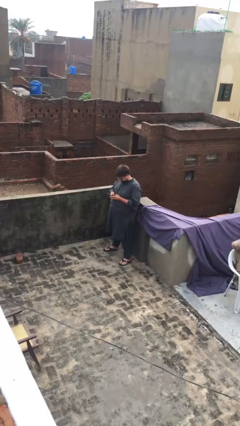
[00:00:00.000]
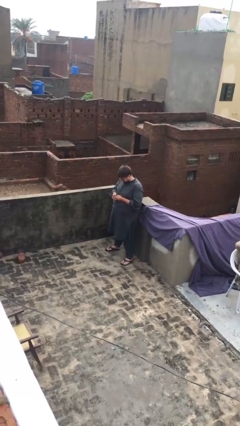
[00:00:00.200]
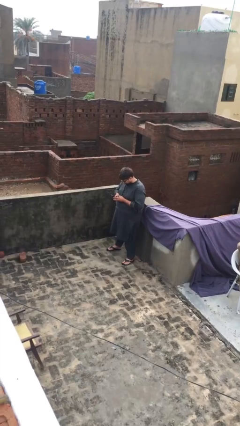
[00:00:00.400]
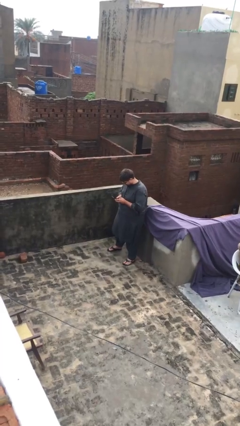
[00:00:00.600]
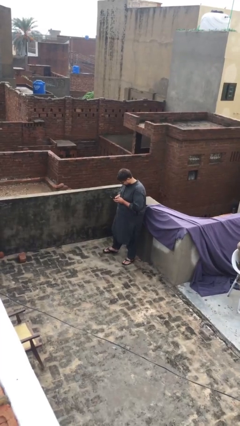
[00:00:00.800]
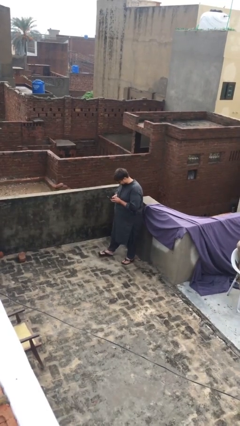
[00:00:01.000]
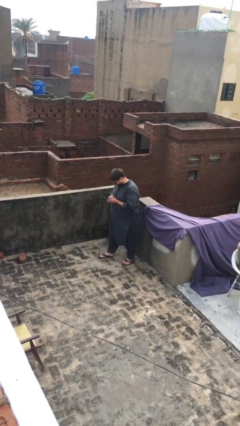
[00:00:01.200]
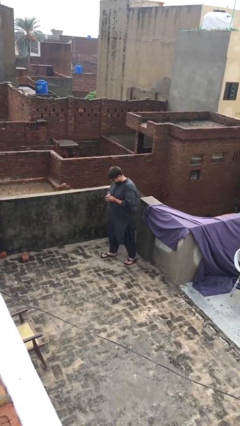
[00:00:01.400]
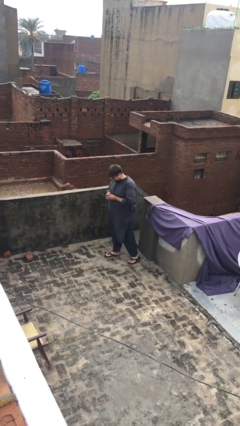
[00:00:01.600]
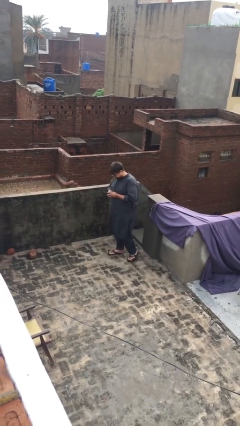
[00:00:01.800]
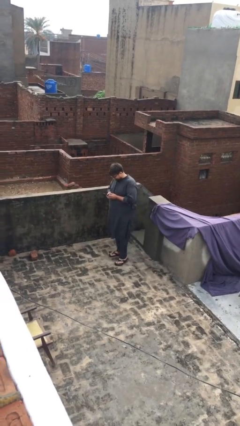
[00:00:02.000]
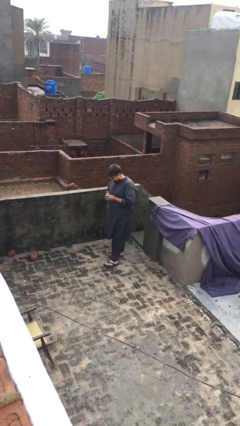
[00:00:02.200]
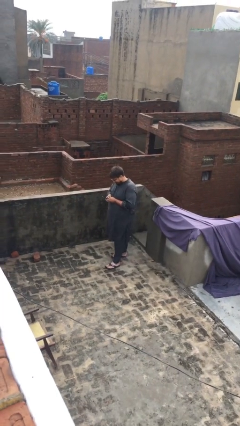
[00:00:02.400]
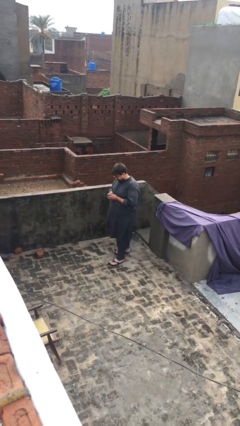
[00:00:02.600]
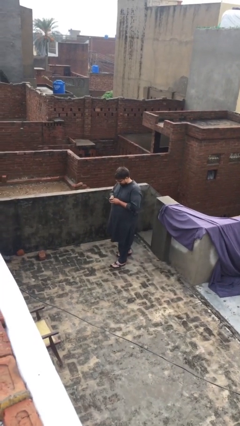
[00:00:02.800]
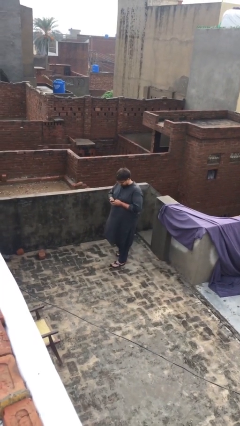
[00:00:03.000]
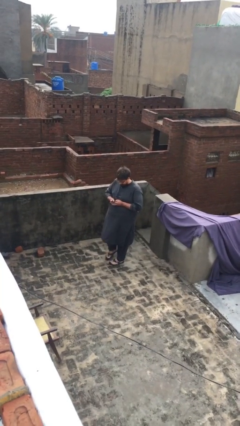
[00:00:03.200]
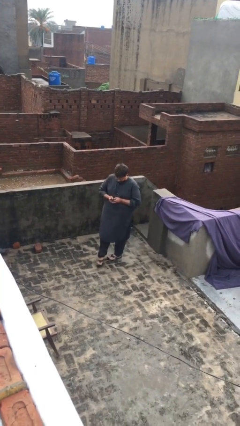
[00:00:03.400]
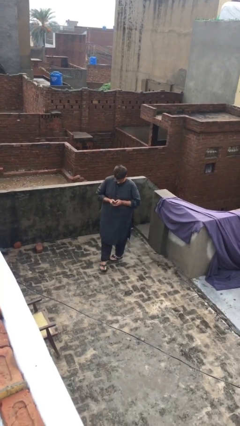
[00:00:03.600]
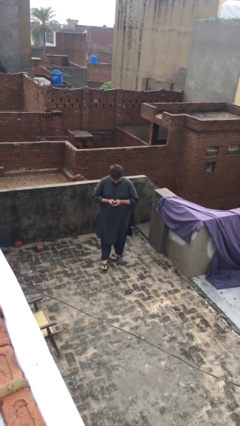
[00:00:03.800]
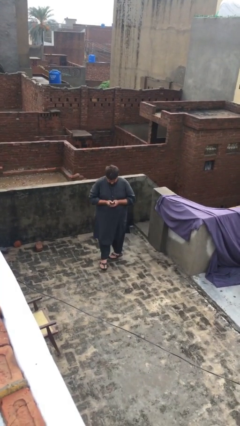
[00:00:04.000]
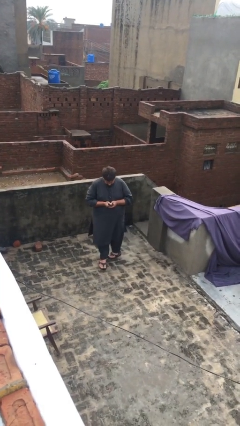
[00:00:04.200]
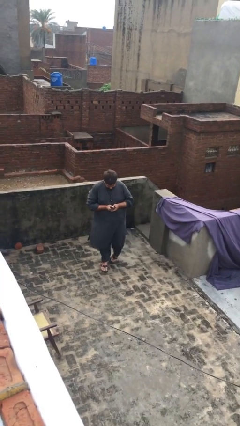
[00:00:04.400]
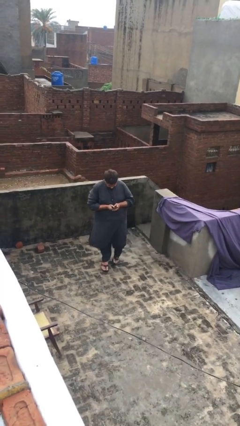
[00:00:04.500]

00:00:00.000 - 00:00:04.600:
person texts on phone

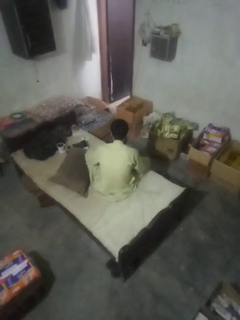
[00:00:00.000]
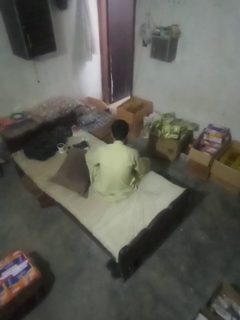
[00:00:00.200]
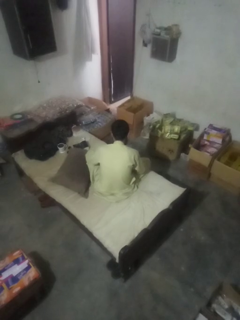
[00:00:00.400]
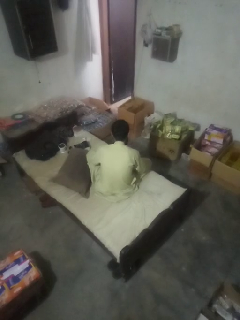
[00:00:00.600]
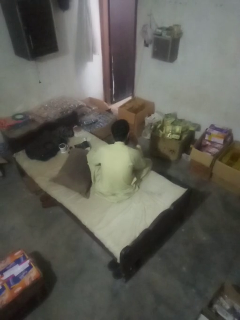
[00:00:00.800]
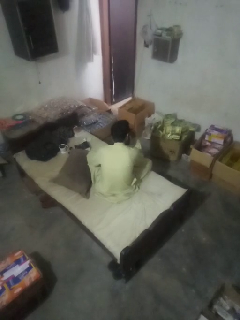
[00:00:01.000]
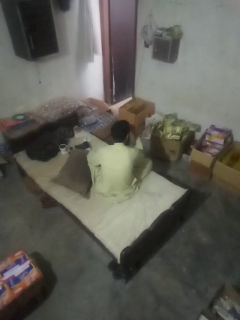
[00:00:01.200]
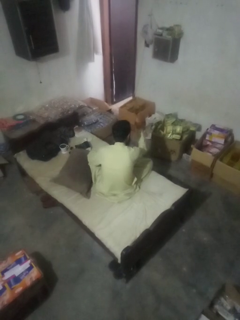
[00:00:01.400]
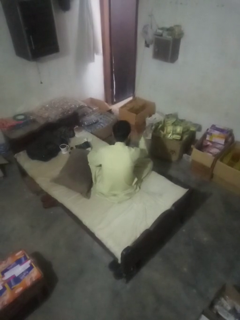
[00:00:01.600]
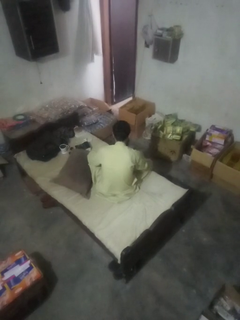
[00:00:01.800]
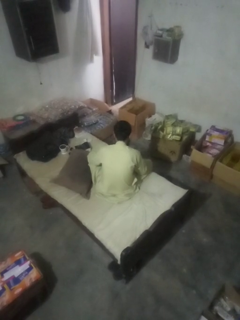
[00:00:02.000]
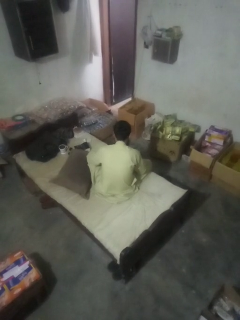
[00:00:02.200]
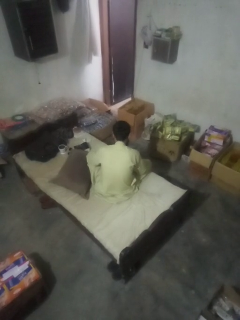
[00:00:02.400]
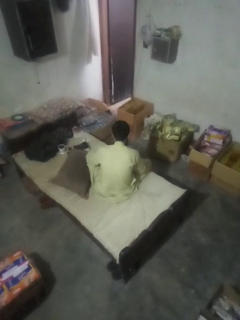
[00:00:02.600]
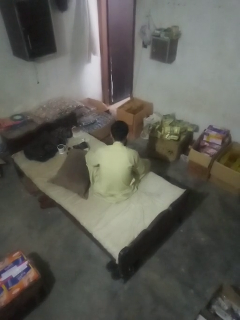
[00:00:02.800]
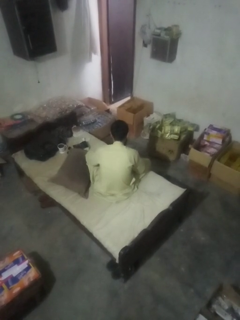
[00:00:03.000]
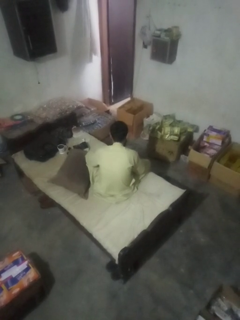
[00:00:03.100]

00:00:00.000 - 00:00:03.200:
person gestures watch closely

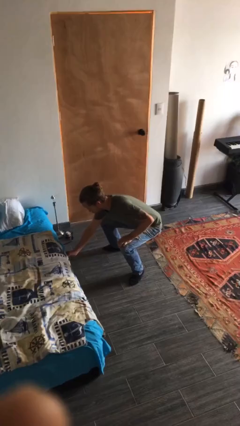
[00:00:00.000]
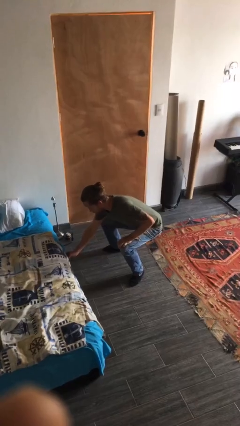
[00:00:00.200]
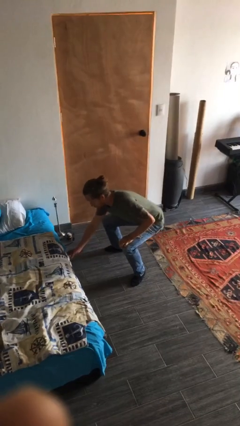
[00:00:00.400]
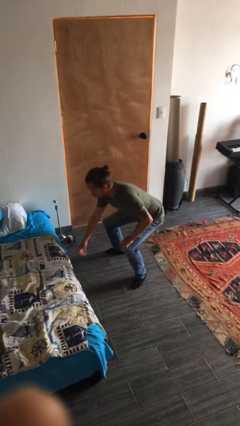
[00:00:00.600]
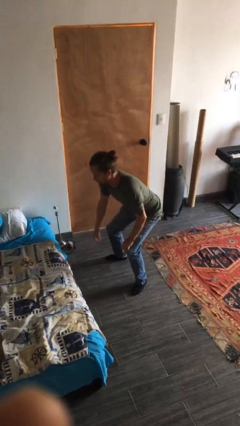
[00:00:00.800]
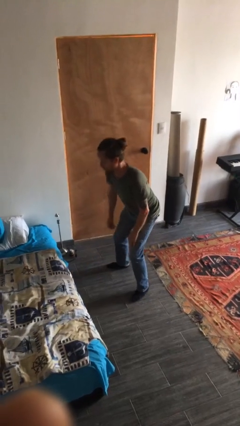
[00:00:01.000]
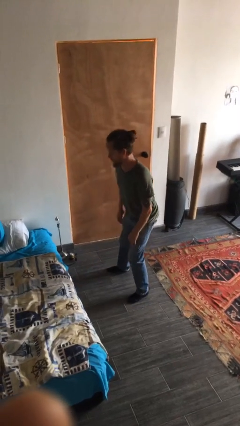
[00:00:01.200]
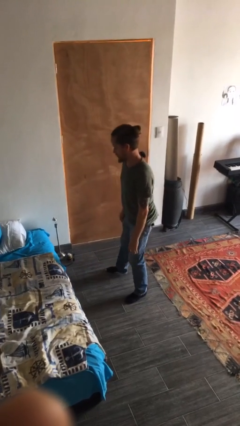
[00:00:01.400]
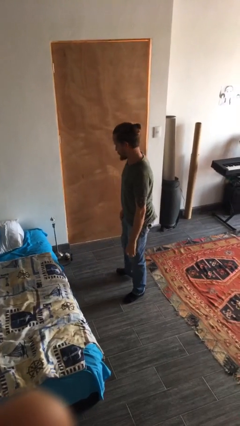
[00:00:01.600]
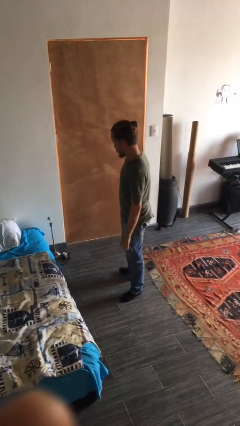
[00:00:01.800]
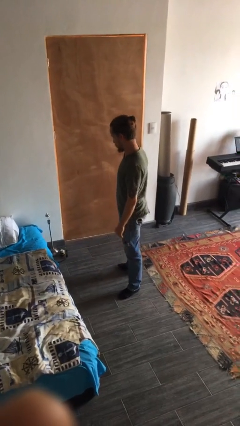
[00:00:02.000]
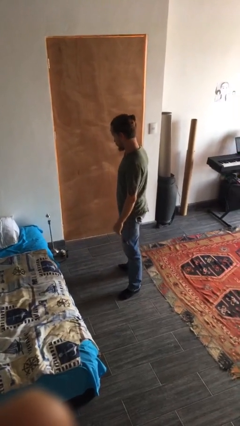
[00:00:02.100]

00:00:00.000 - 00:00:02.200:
person stands up

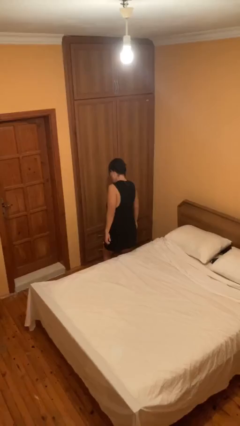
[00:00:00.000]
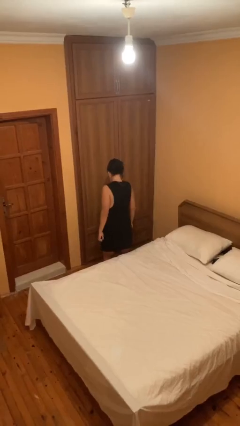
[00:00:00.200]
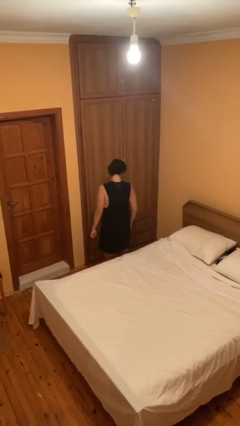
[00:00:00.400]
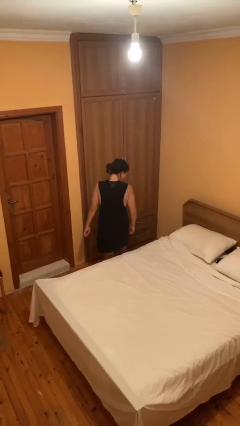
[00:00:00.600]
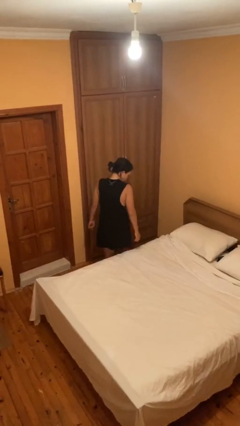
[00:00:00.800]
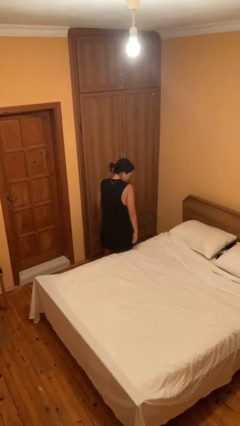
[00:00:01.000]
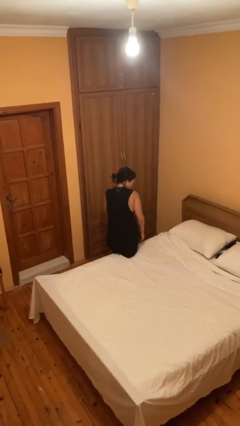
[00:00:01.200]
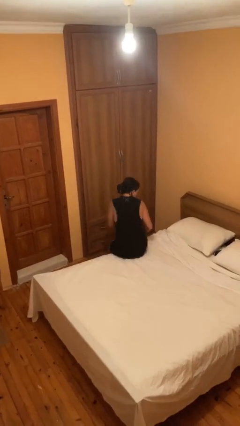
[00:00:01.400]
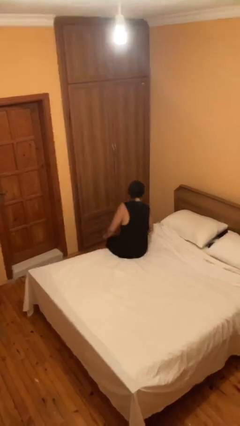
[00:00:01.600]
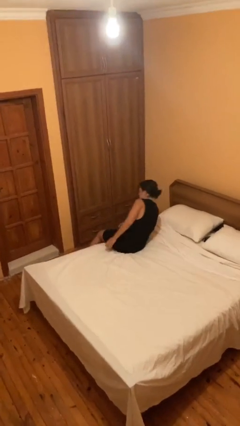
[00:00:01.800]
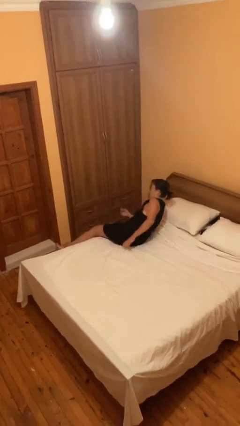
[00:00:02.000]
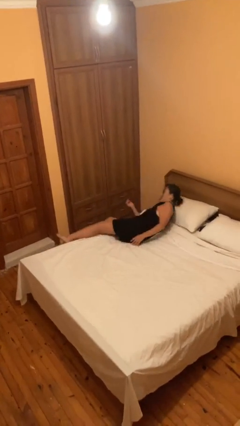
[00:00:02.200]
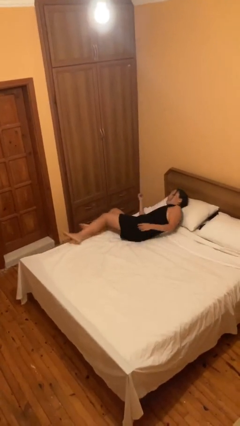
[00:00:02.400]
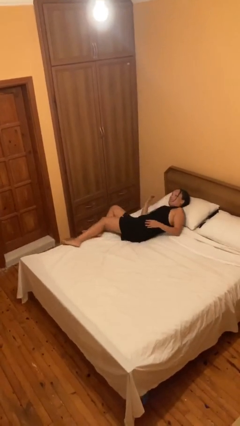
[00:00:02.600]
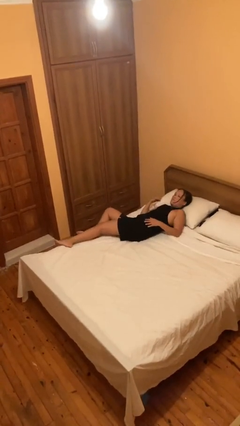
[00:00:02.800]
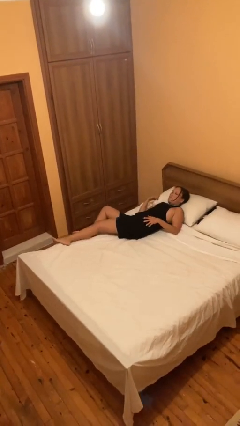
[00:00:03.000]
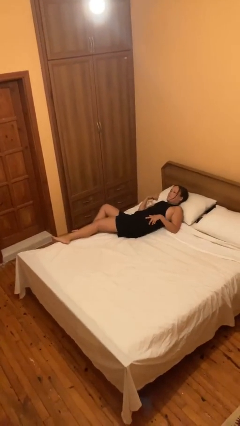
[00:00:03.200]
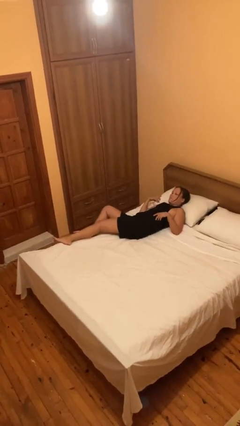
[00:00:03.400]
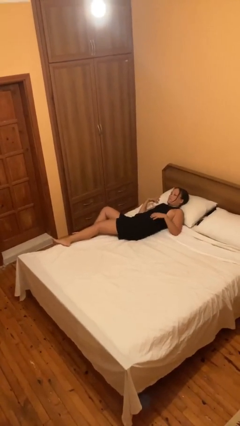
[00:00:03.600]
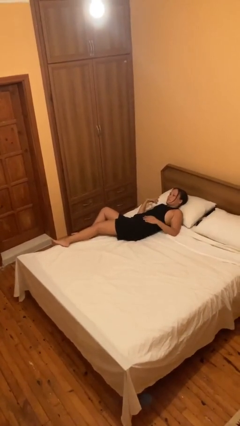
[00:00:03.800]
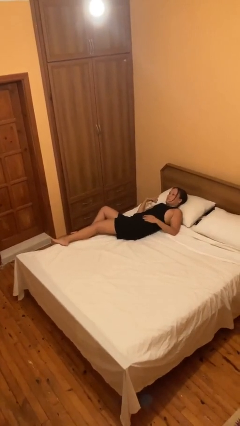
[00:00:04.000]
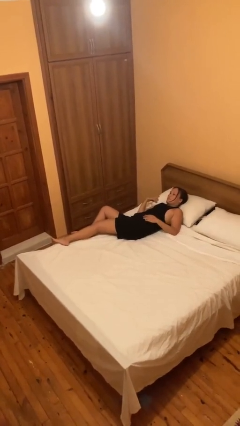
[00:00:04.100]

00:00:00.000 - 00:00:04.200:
person lies down on bed

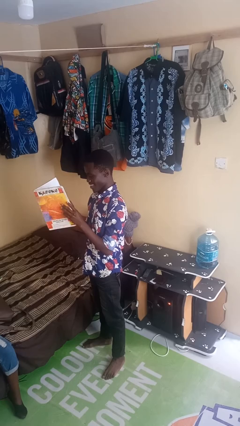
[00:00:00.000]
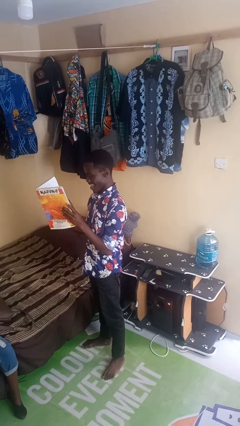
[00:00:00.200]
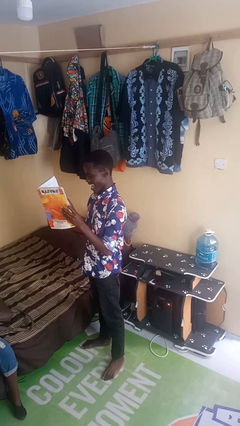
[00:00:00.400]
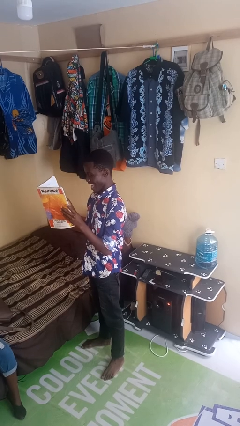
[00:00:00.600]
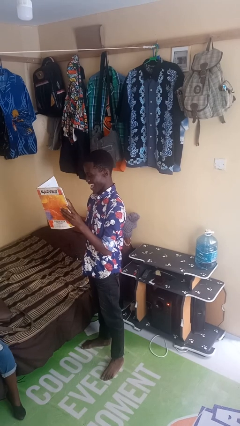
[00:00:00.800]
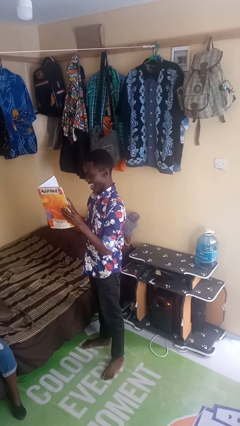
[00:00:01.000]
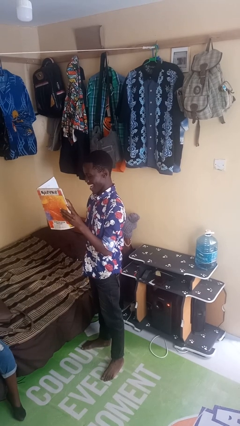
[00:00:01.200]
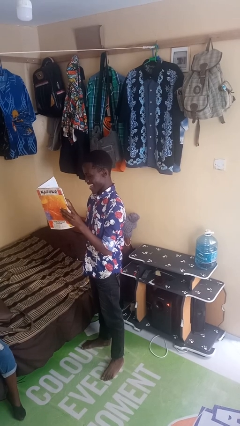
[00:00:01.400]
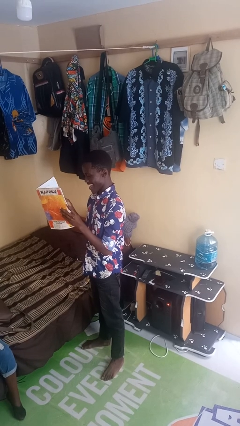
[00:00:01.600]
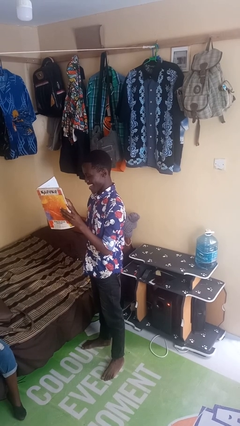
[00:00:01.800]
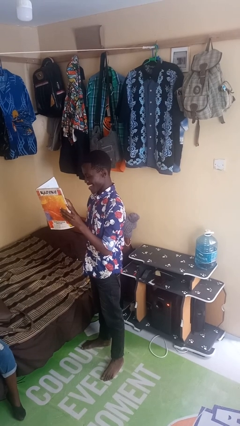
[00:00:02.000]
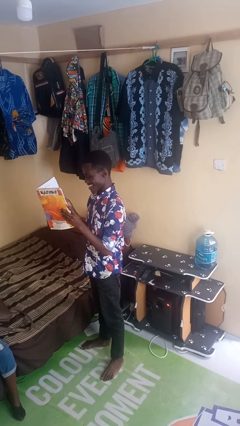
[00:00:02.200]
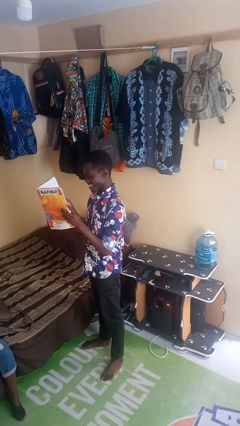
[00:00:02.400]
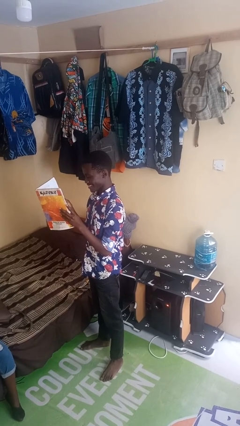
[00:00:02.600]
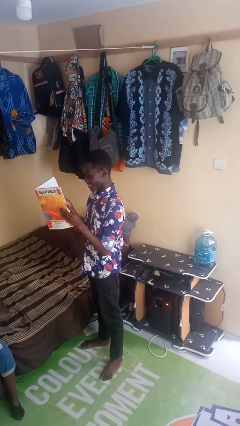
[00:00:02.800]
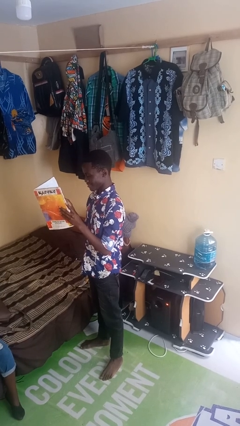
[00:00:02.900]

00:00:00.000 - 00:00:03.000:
person reads newspaper

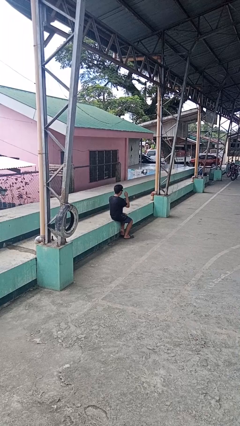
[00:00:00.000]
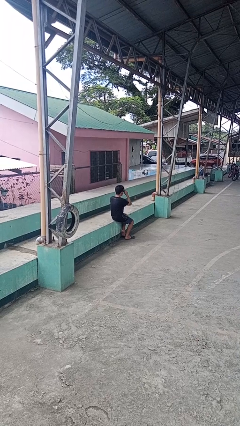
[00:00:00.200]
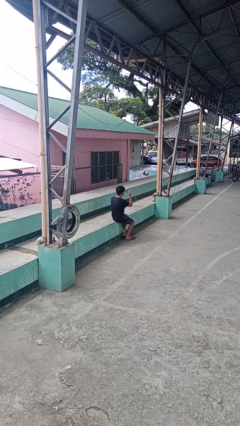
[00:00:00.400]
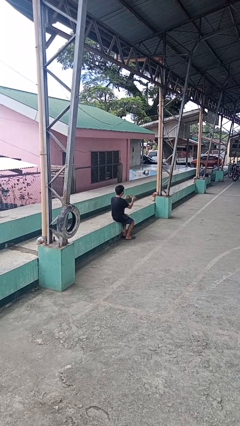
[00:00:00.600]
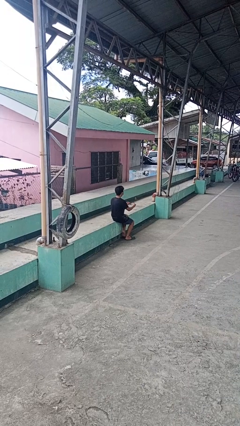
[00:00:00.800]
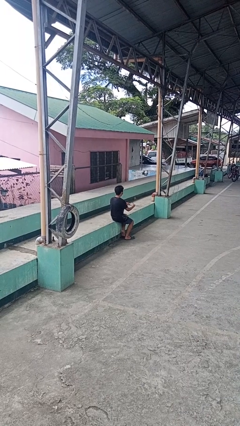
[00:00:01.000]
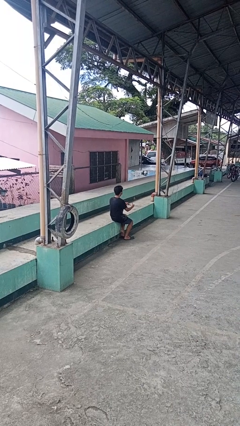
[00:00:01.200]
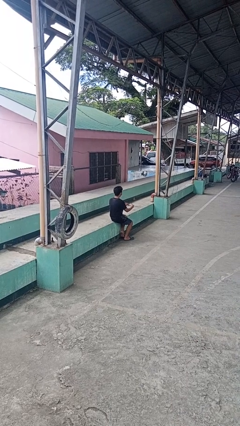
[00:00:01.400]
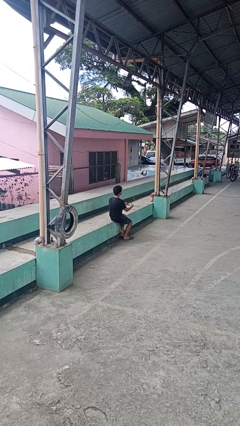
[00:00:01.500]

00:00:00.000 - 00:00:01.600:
person takes off sunglasses
